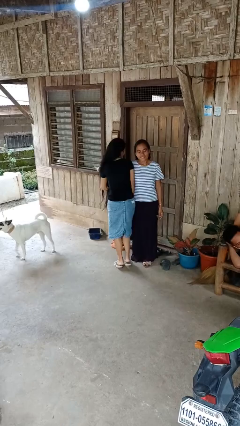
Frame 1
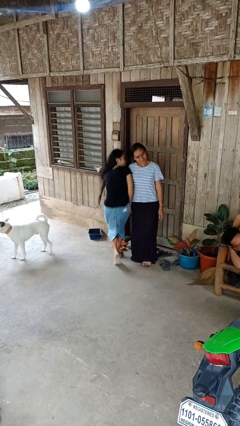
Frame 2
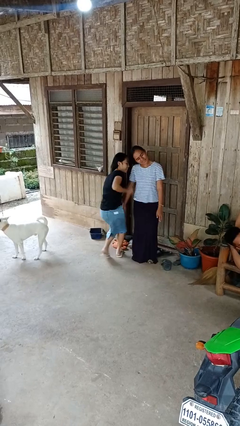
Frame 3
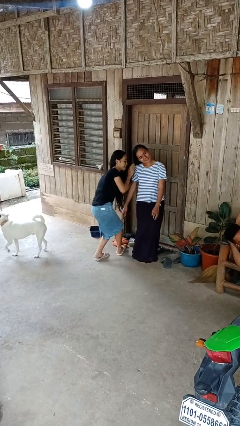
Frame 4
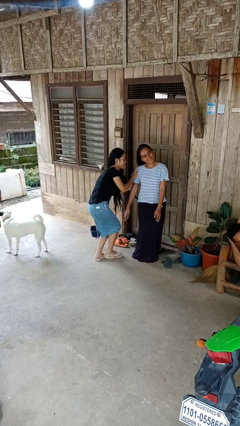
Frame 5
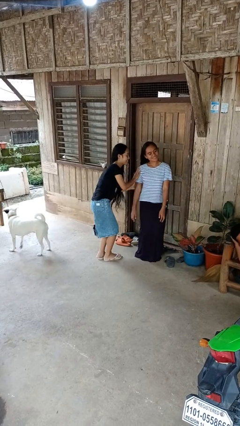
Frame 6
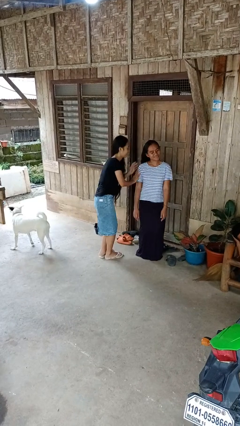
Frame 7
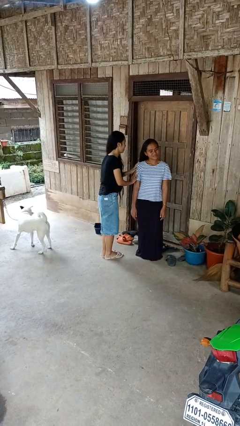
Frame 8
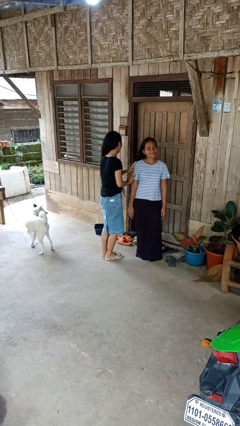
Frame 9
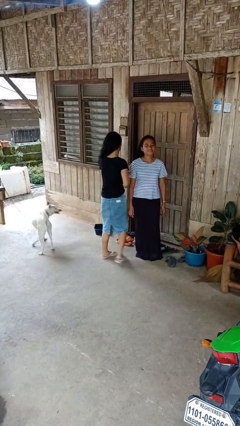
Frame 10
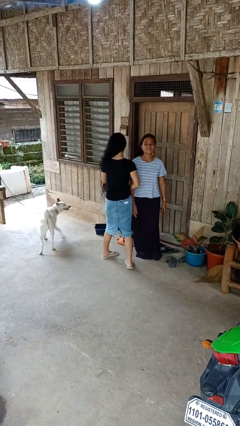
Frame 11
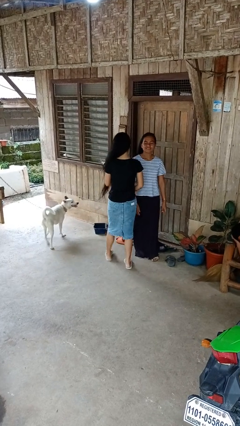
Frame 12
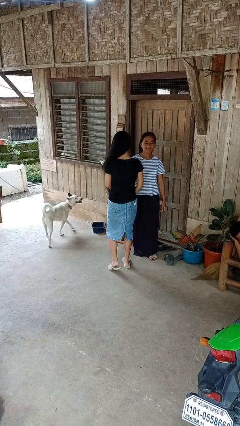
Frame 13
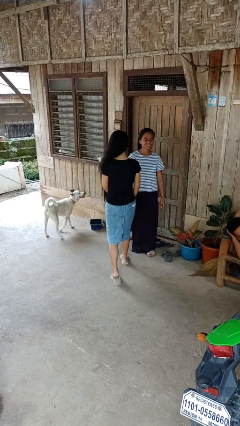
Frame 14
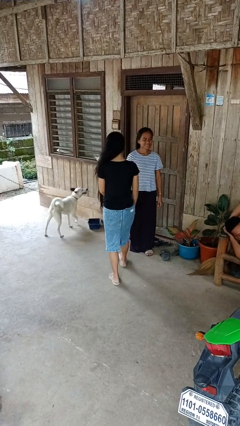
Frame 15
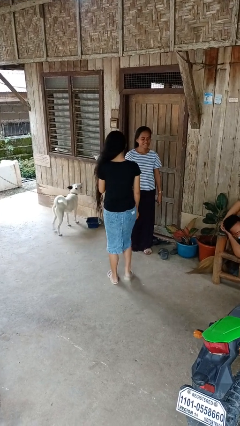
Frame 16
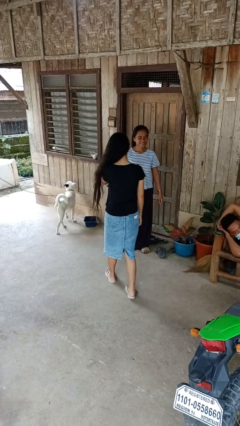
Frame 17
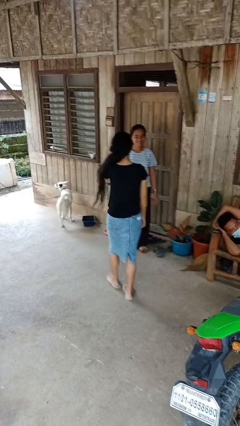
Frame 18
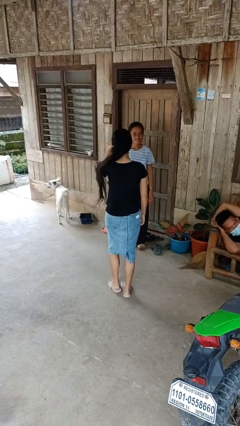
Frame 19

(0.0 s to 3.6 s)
person bumps into person

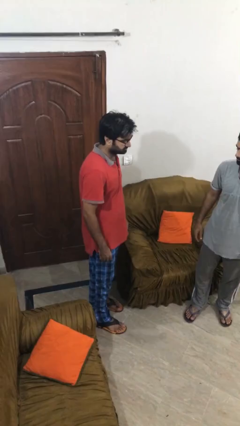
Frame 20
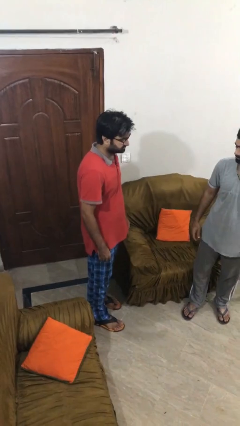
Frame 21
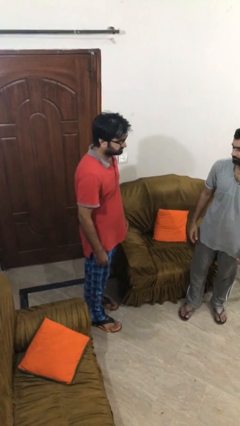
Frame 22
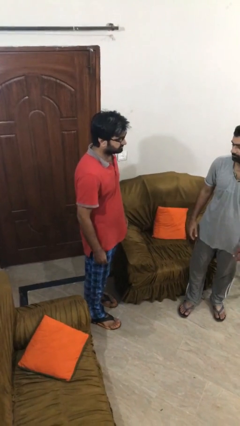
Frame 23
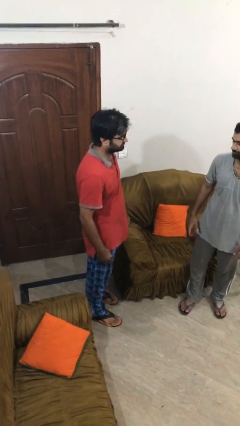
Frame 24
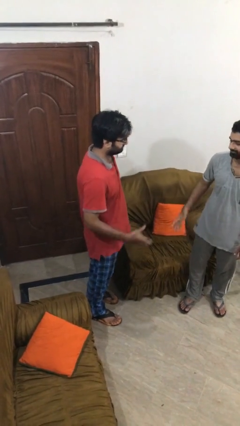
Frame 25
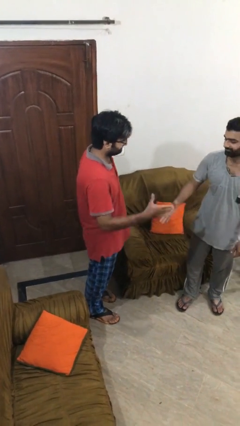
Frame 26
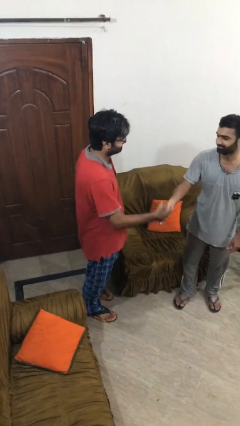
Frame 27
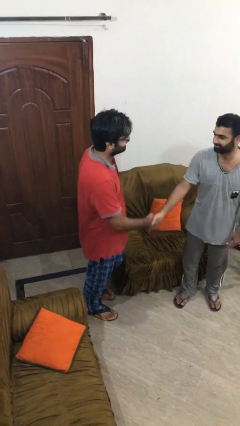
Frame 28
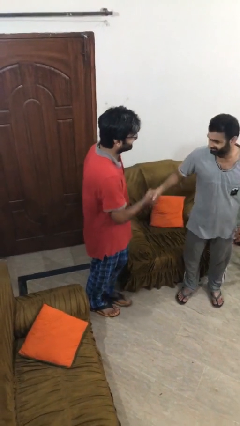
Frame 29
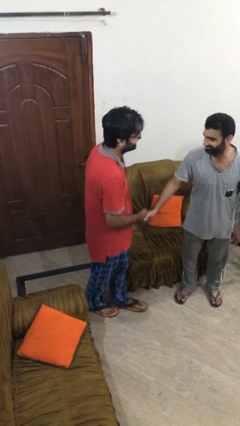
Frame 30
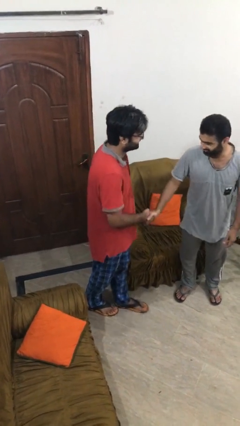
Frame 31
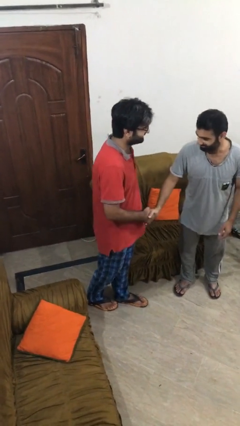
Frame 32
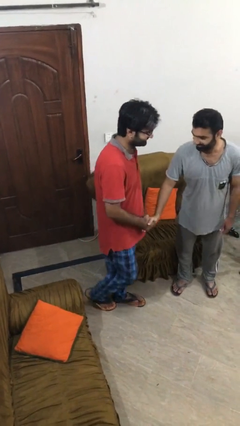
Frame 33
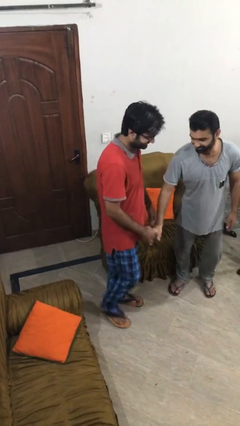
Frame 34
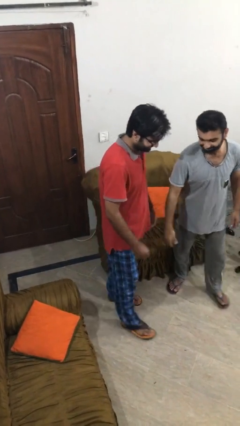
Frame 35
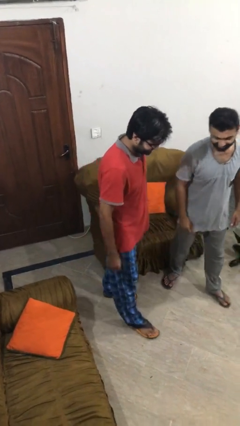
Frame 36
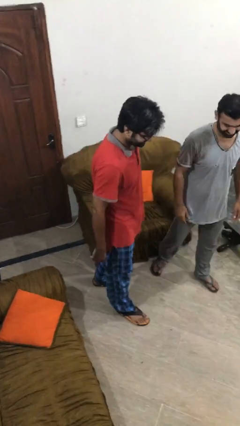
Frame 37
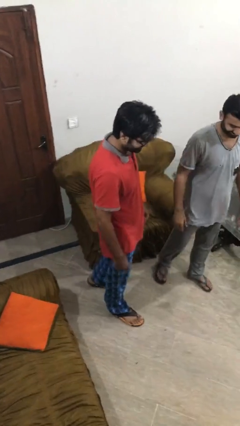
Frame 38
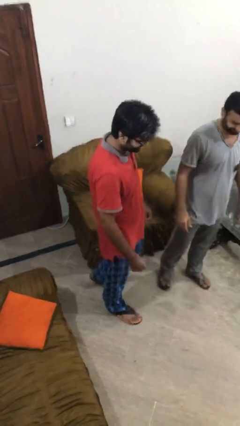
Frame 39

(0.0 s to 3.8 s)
person shakes hand

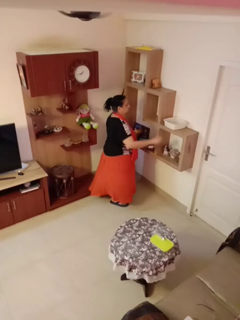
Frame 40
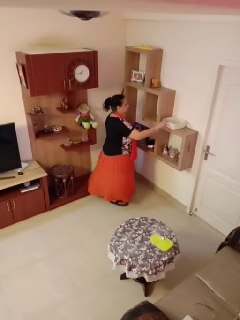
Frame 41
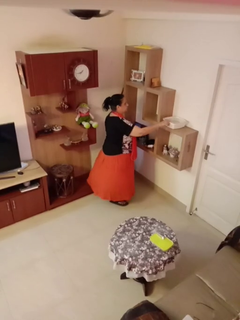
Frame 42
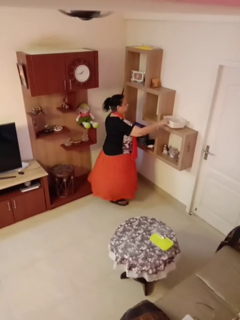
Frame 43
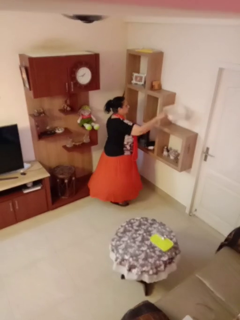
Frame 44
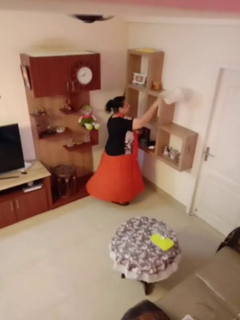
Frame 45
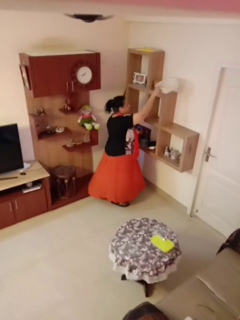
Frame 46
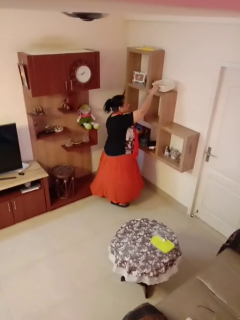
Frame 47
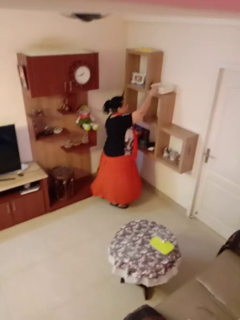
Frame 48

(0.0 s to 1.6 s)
person picks up object from shelf

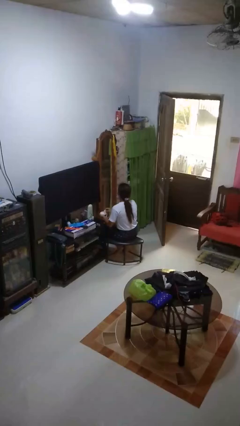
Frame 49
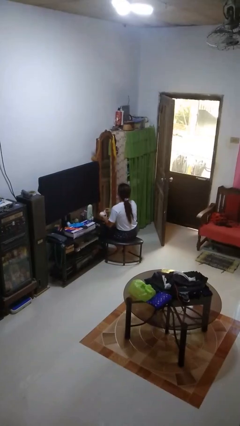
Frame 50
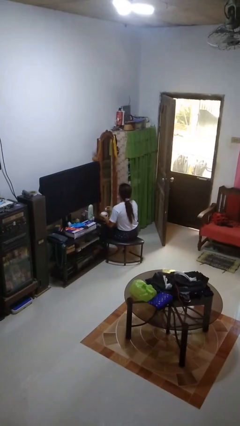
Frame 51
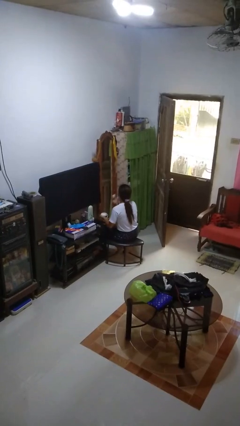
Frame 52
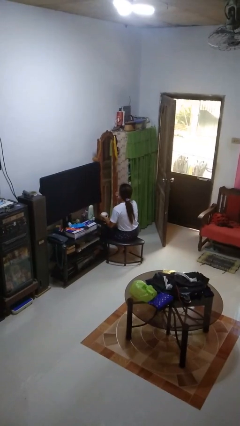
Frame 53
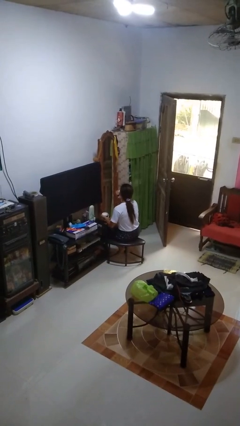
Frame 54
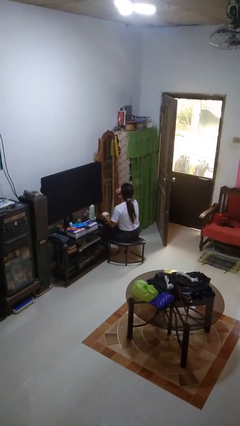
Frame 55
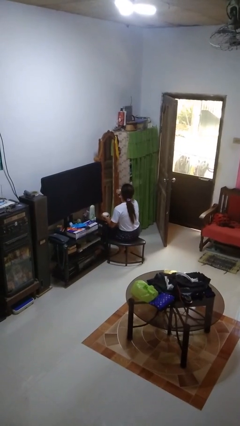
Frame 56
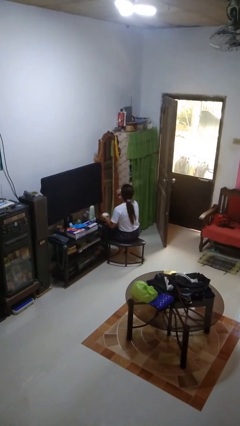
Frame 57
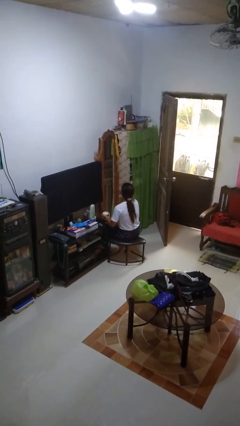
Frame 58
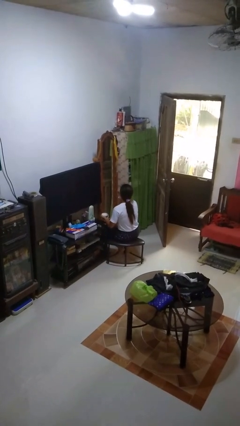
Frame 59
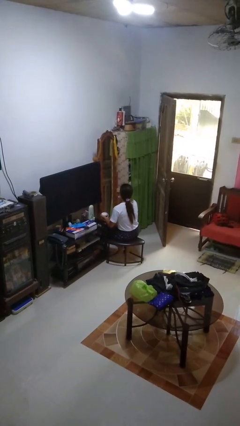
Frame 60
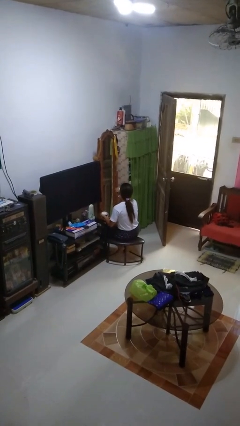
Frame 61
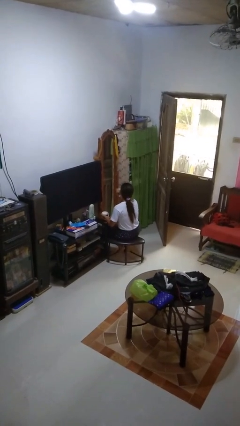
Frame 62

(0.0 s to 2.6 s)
person applies foundation makeup

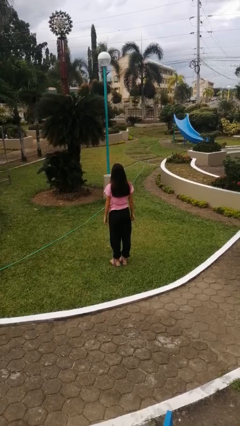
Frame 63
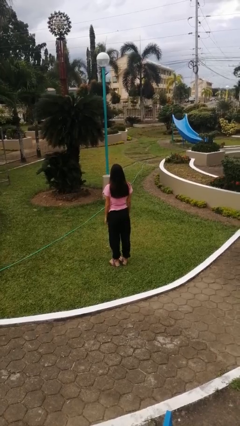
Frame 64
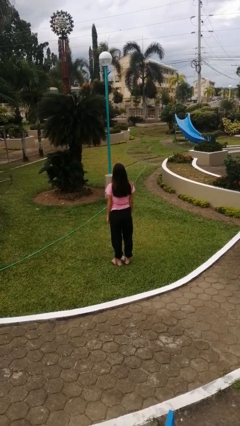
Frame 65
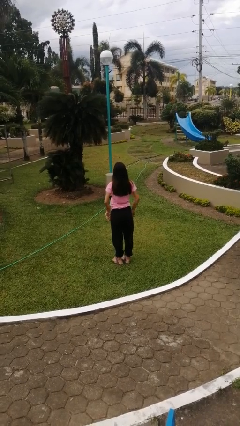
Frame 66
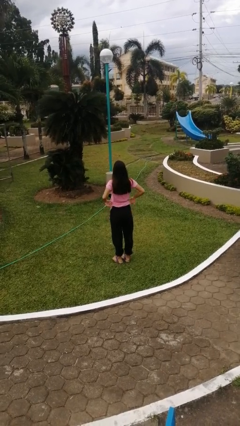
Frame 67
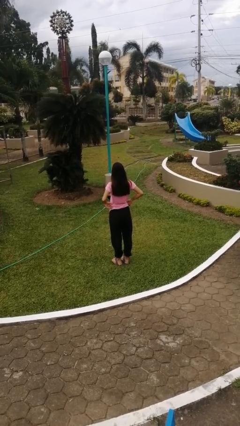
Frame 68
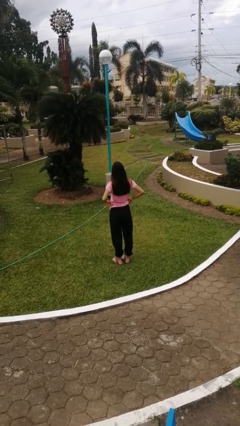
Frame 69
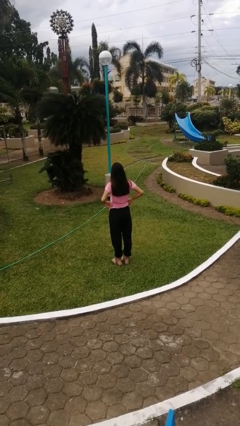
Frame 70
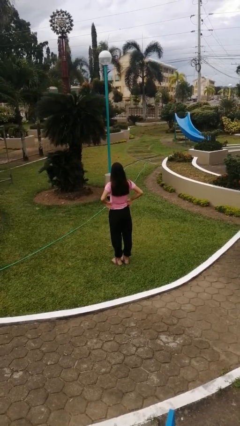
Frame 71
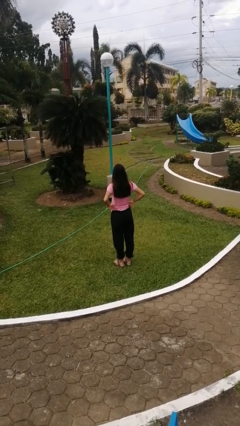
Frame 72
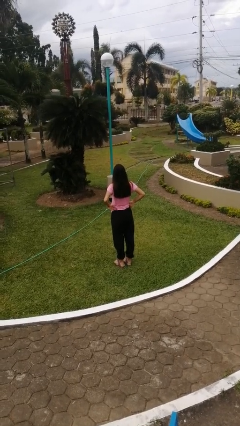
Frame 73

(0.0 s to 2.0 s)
person hikes up pants

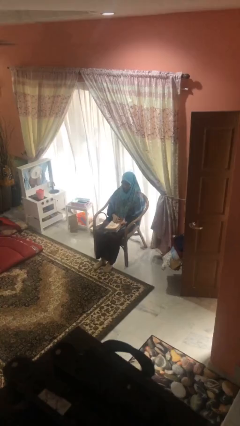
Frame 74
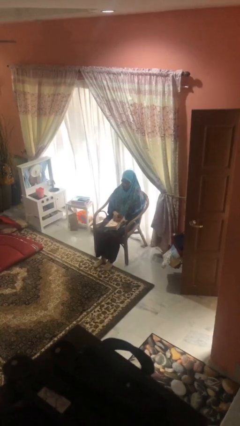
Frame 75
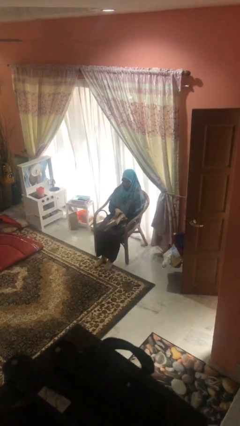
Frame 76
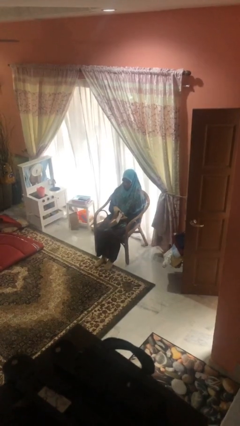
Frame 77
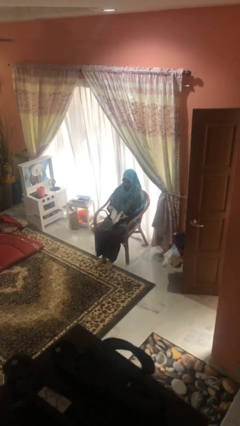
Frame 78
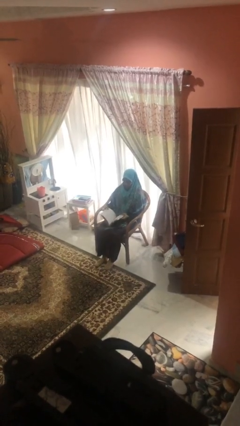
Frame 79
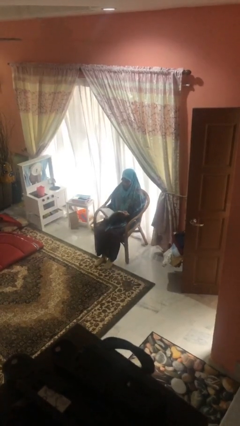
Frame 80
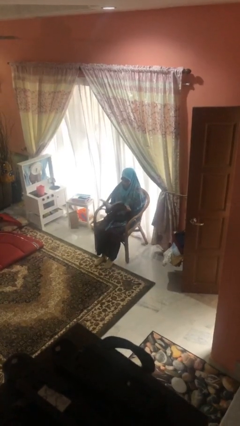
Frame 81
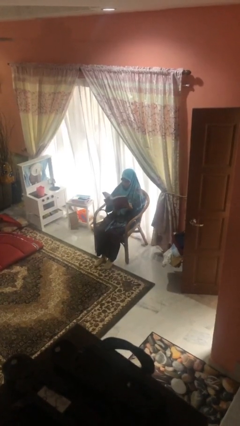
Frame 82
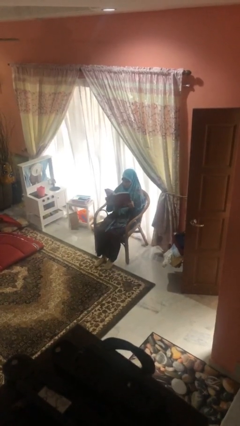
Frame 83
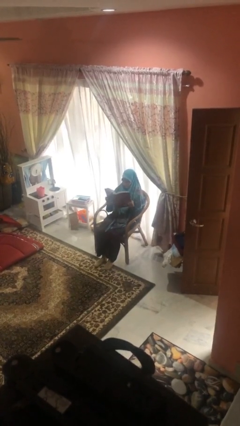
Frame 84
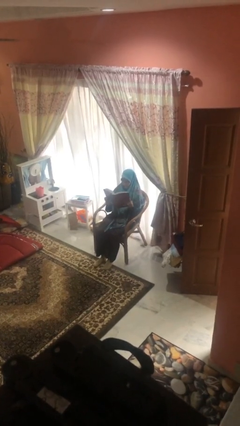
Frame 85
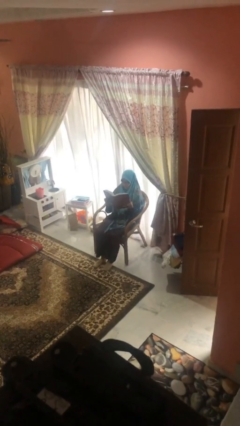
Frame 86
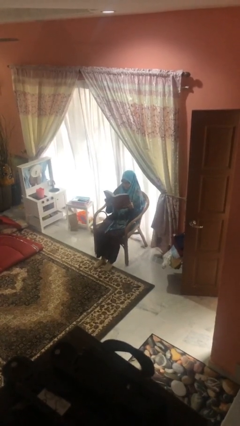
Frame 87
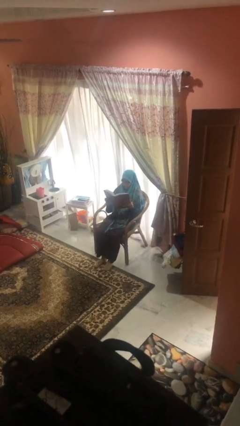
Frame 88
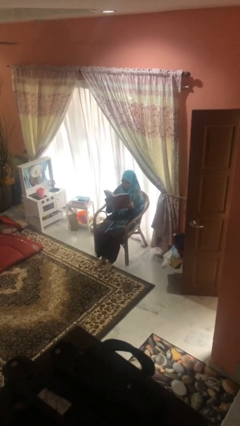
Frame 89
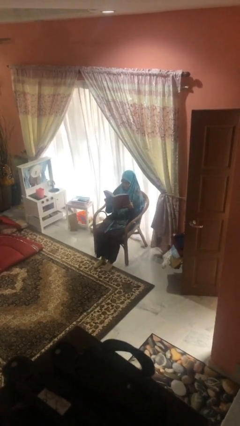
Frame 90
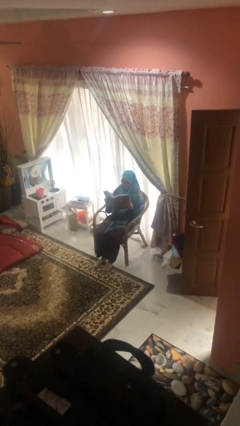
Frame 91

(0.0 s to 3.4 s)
person reads document

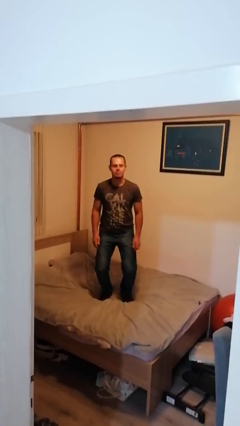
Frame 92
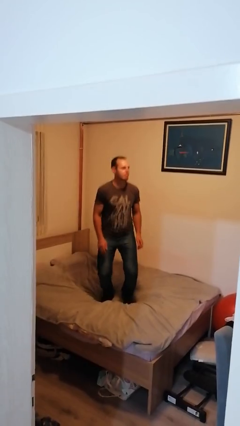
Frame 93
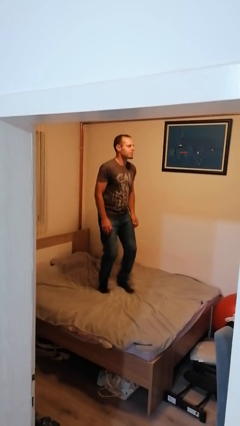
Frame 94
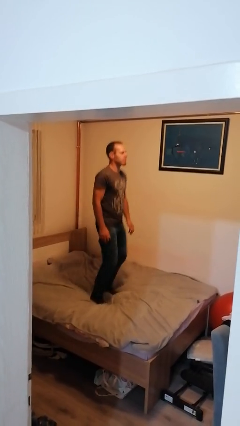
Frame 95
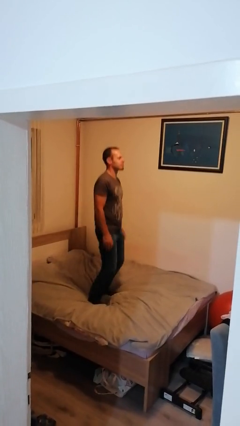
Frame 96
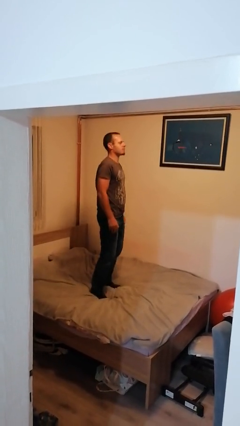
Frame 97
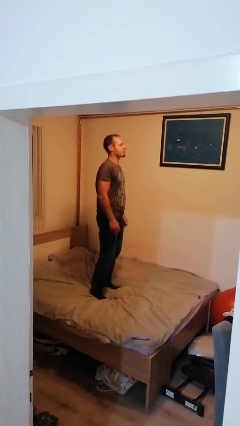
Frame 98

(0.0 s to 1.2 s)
person jumps on bed
